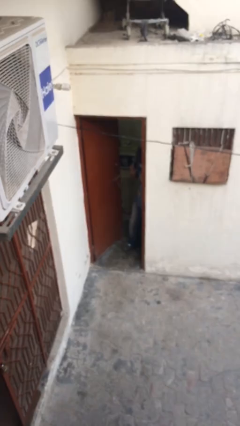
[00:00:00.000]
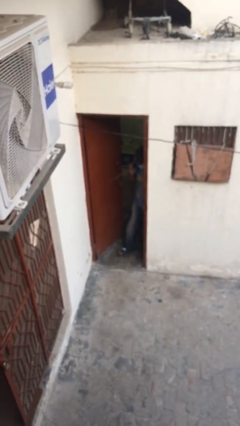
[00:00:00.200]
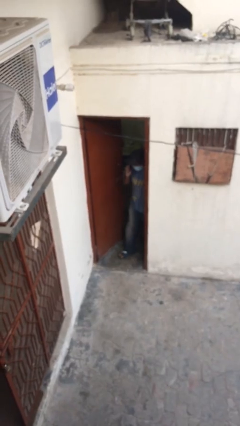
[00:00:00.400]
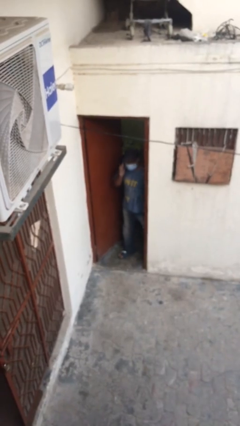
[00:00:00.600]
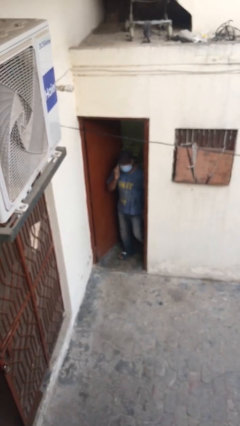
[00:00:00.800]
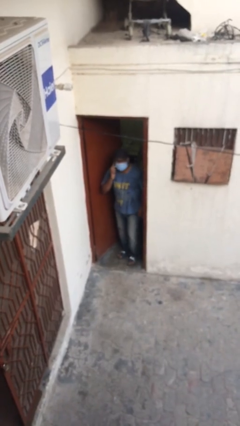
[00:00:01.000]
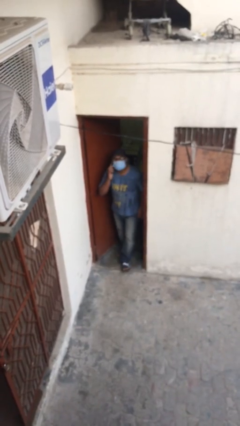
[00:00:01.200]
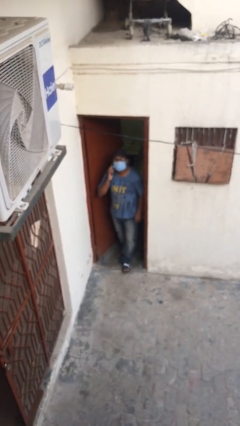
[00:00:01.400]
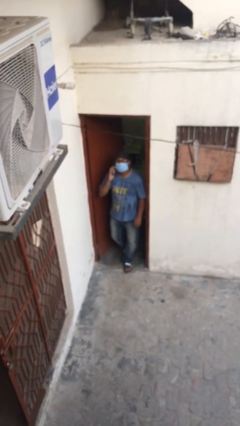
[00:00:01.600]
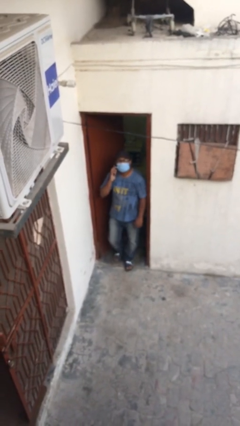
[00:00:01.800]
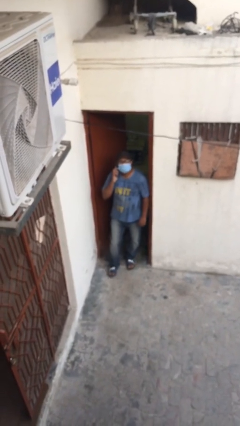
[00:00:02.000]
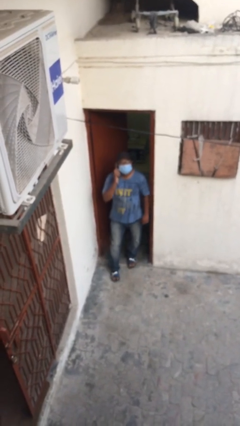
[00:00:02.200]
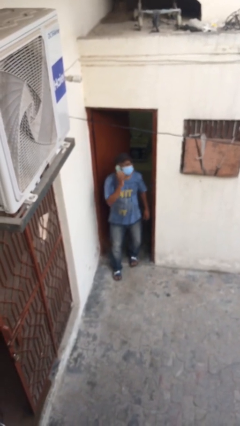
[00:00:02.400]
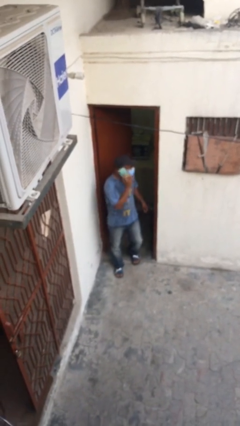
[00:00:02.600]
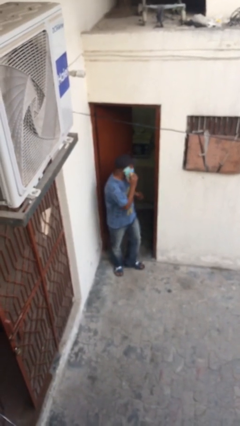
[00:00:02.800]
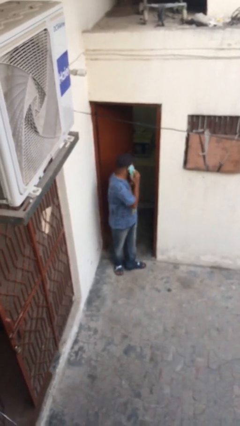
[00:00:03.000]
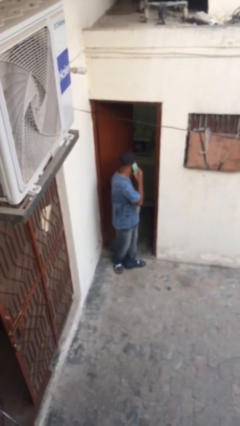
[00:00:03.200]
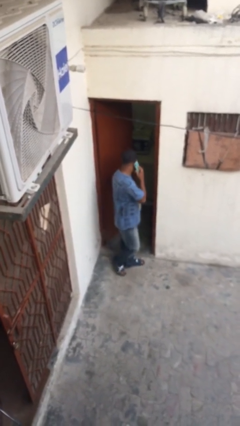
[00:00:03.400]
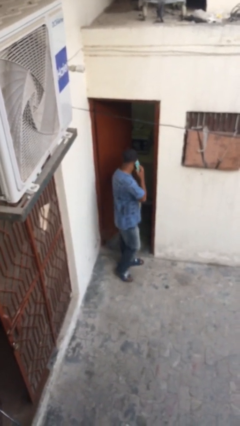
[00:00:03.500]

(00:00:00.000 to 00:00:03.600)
person enters scene through structure

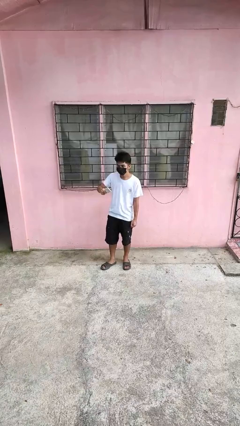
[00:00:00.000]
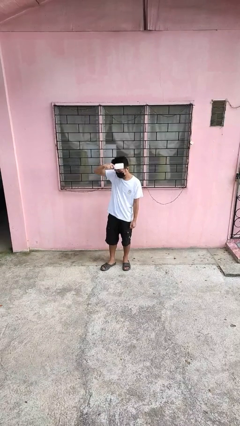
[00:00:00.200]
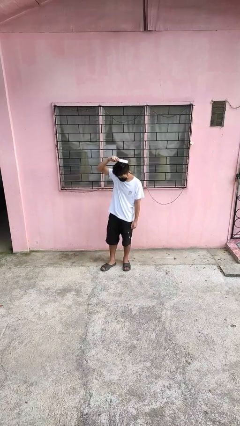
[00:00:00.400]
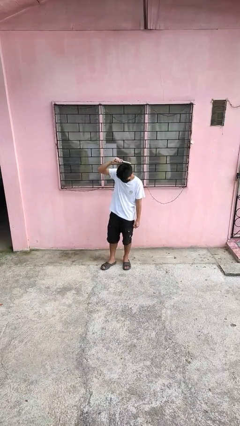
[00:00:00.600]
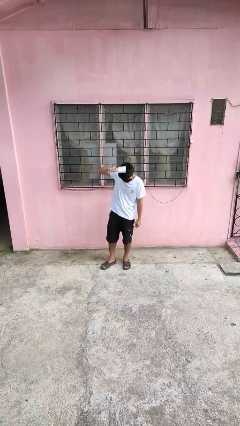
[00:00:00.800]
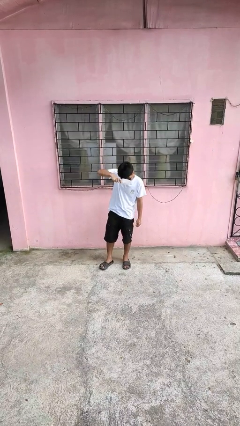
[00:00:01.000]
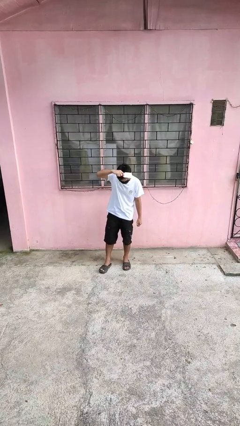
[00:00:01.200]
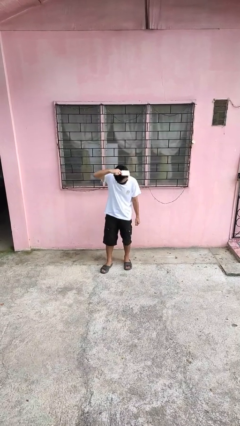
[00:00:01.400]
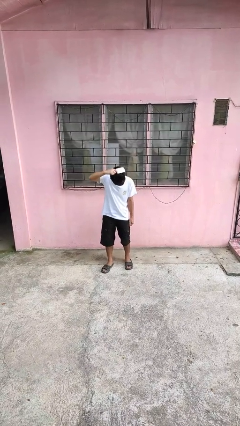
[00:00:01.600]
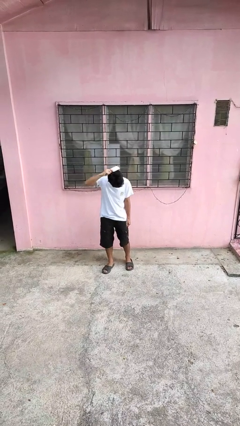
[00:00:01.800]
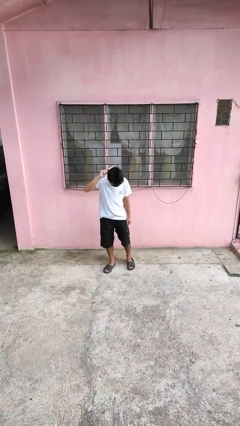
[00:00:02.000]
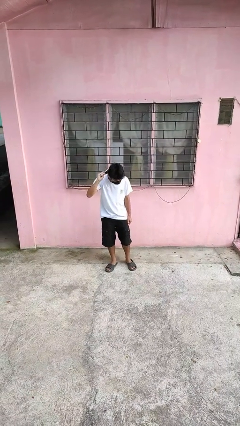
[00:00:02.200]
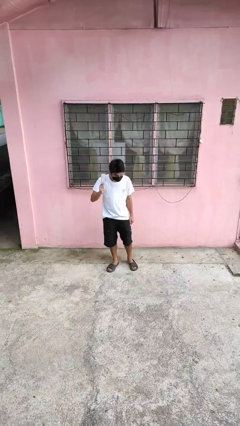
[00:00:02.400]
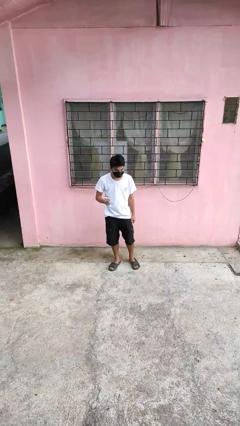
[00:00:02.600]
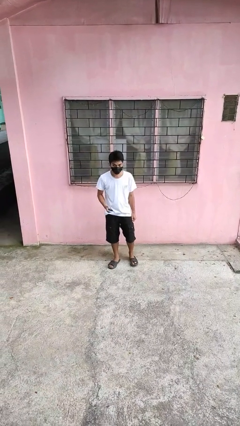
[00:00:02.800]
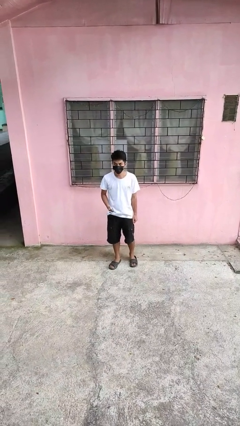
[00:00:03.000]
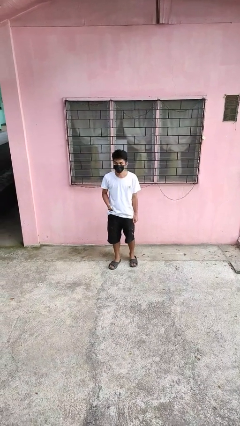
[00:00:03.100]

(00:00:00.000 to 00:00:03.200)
person brushes hair

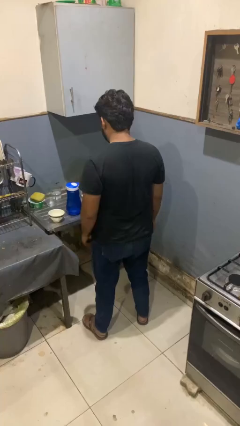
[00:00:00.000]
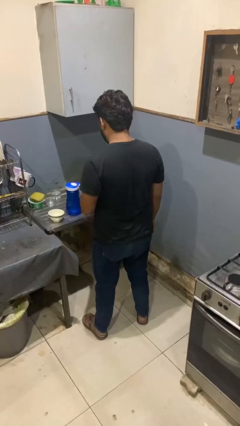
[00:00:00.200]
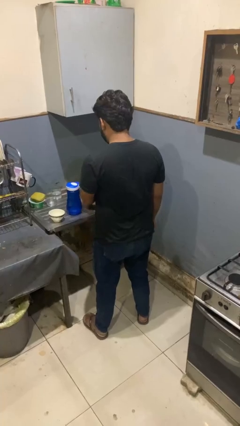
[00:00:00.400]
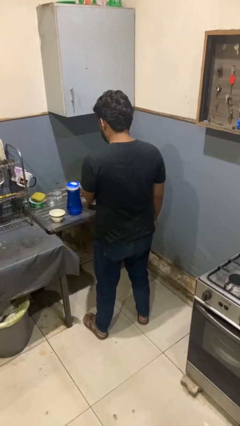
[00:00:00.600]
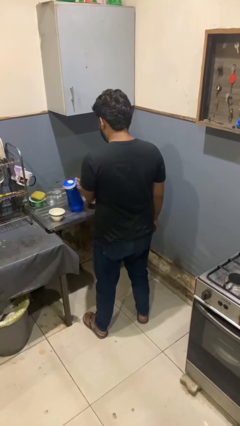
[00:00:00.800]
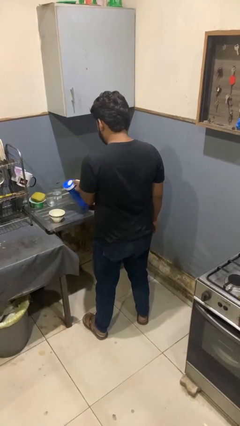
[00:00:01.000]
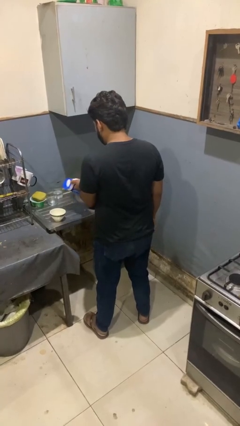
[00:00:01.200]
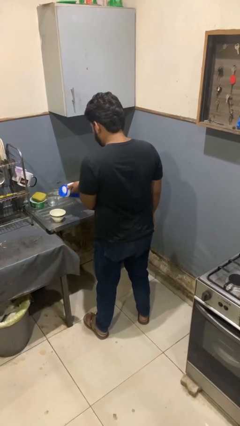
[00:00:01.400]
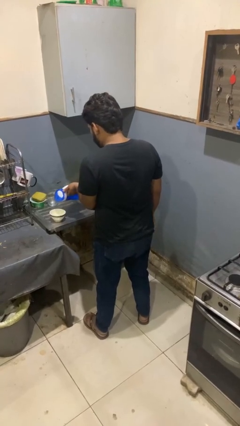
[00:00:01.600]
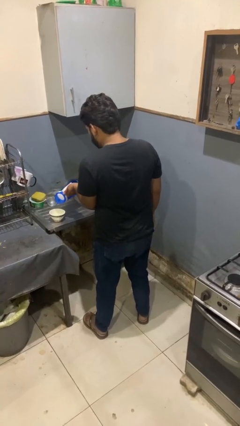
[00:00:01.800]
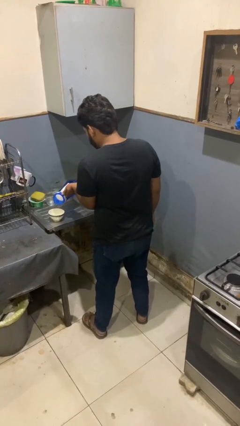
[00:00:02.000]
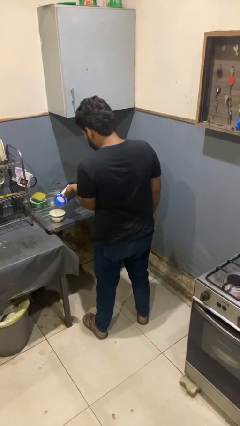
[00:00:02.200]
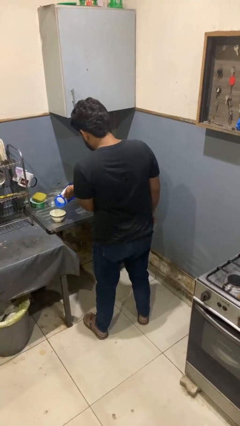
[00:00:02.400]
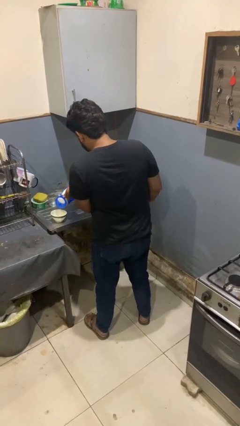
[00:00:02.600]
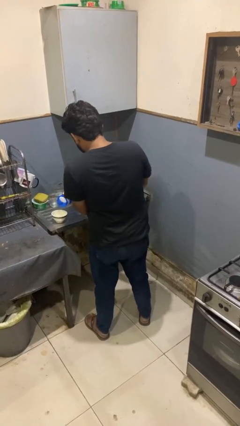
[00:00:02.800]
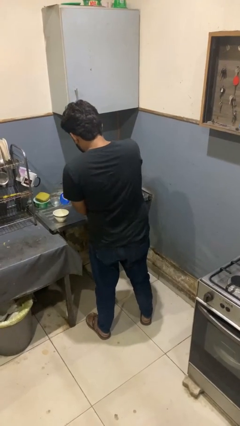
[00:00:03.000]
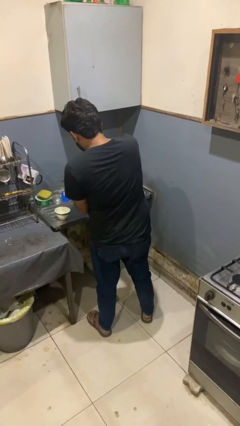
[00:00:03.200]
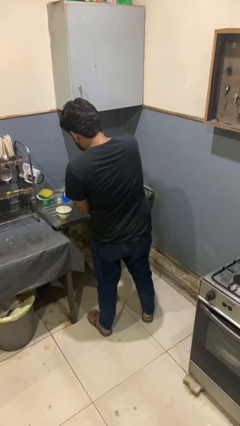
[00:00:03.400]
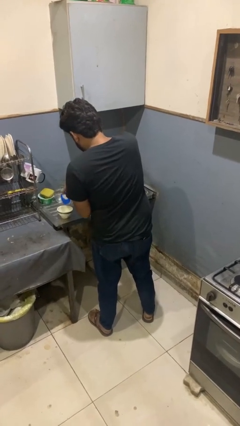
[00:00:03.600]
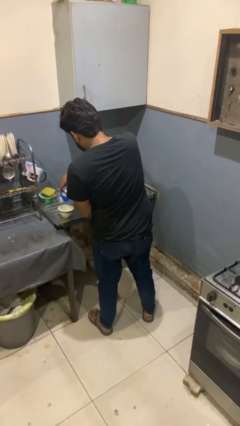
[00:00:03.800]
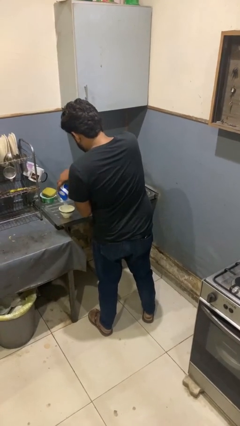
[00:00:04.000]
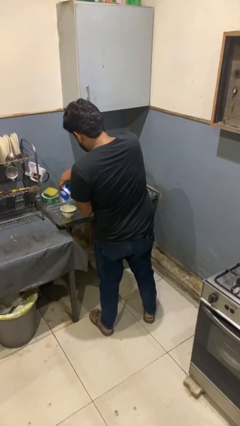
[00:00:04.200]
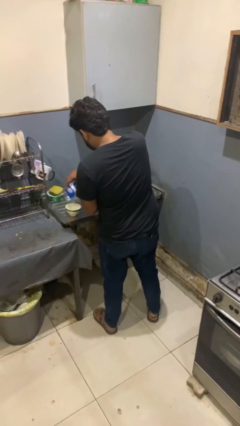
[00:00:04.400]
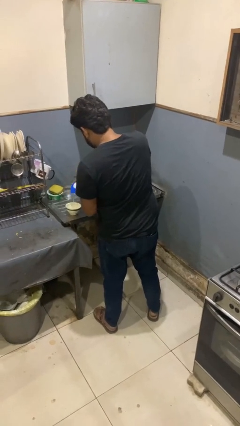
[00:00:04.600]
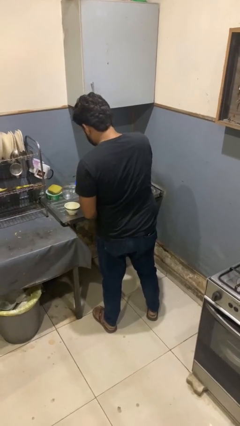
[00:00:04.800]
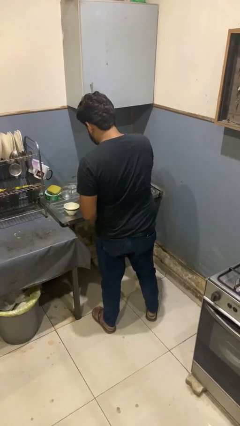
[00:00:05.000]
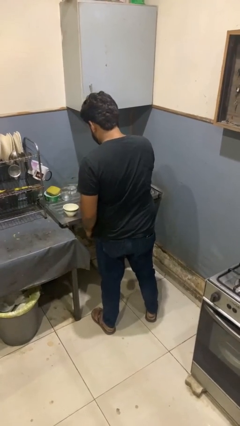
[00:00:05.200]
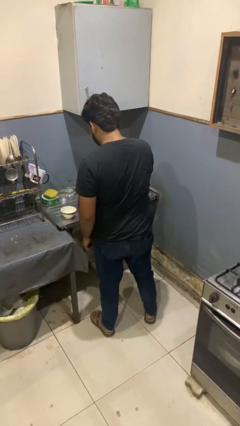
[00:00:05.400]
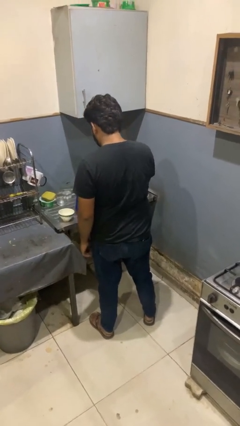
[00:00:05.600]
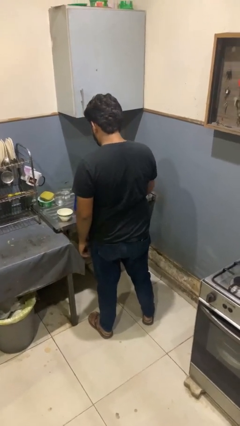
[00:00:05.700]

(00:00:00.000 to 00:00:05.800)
person pours into bowl

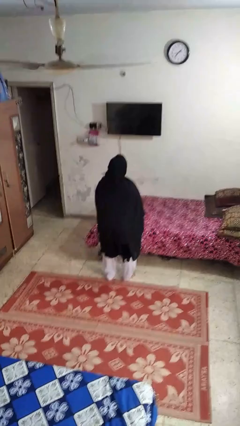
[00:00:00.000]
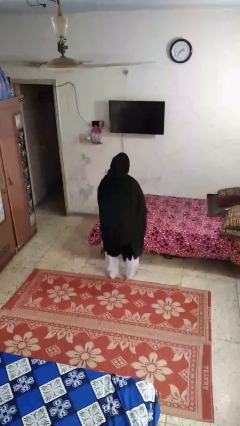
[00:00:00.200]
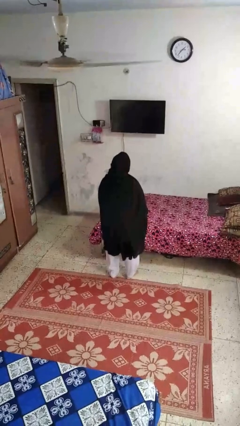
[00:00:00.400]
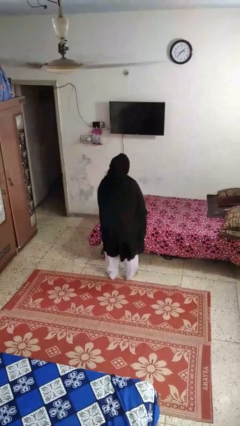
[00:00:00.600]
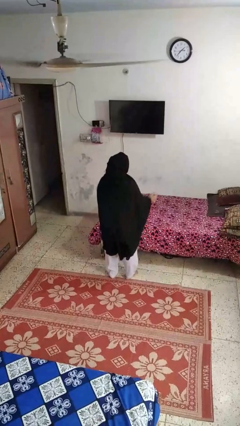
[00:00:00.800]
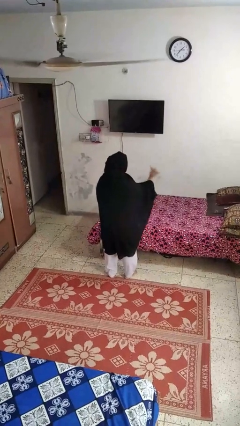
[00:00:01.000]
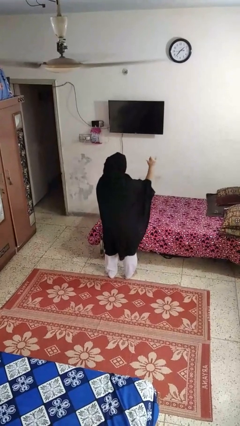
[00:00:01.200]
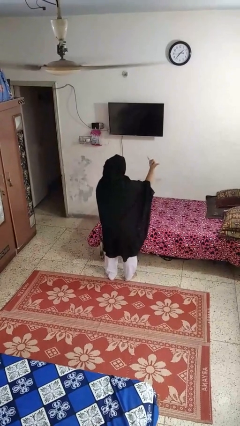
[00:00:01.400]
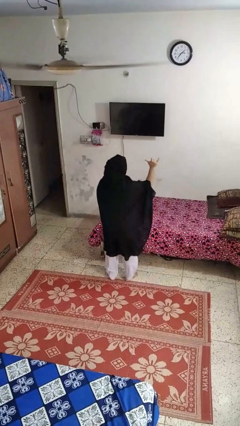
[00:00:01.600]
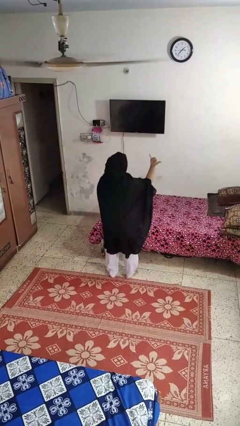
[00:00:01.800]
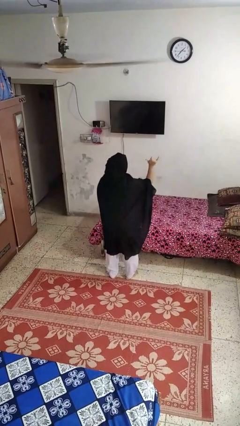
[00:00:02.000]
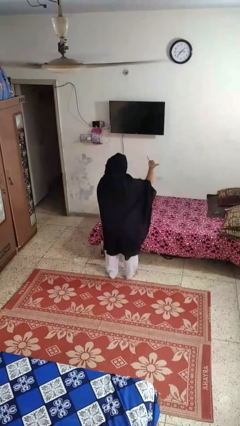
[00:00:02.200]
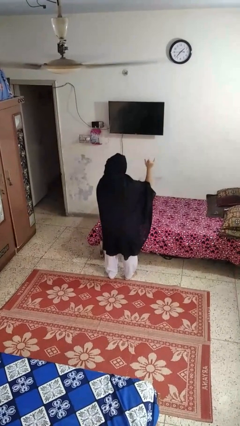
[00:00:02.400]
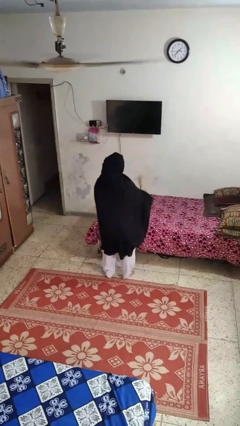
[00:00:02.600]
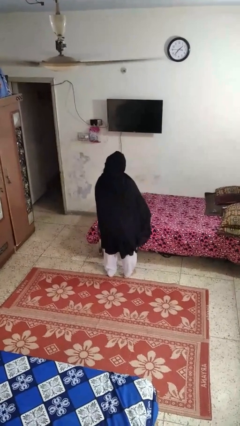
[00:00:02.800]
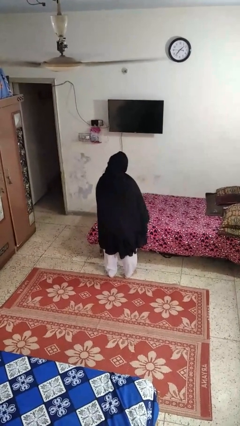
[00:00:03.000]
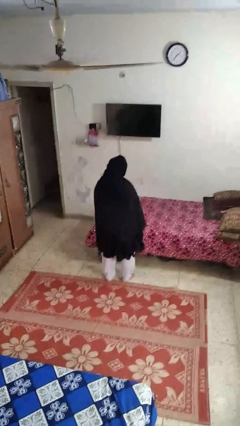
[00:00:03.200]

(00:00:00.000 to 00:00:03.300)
person gestures hang loose

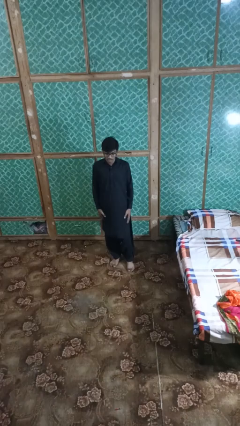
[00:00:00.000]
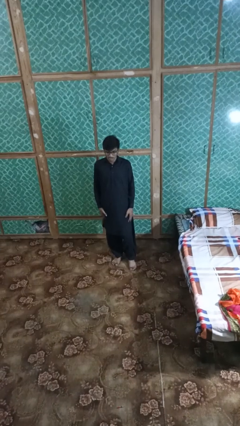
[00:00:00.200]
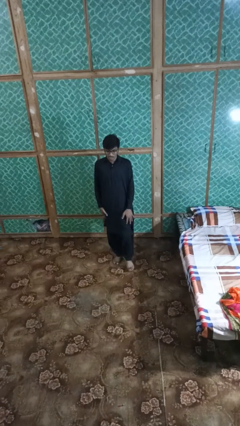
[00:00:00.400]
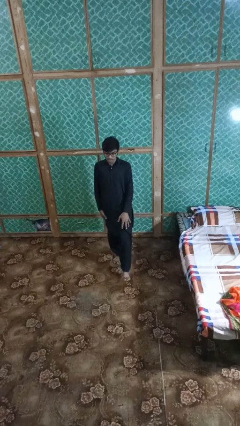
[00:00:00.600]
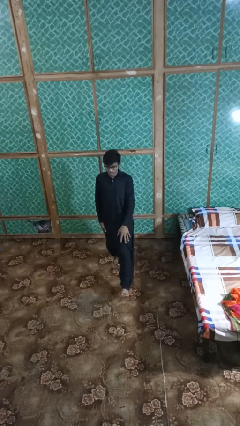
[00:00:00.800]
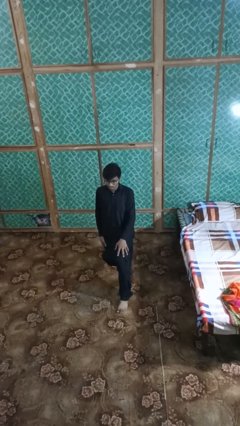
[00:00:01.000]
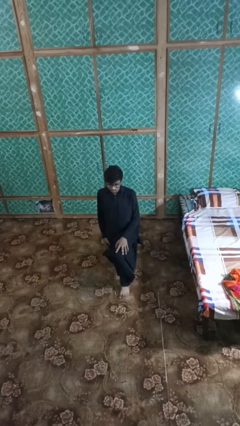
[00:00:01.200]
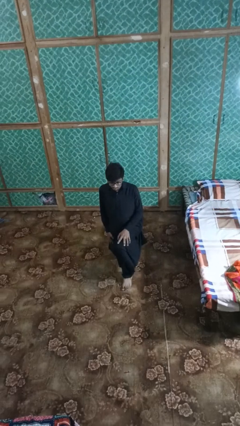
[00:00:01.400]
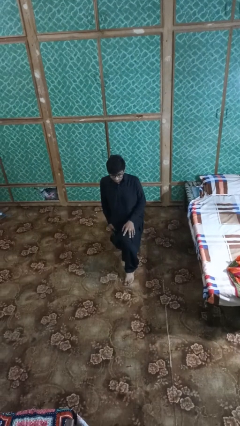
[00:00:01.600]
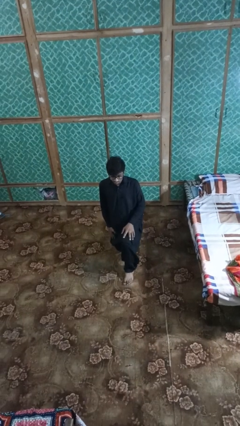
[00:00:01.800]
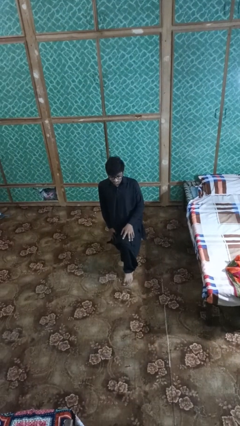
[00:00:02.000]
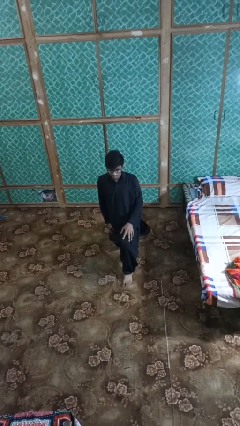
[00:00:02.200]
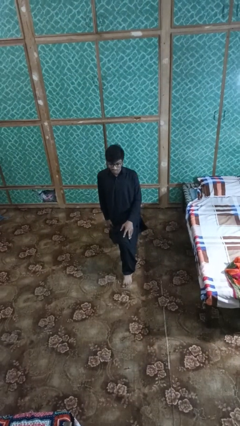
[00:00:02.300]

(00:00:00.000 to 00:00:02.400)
person exercises with lunges
